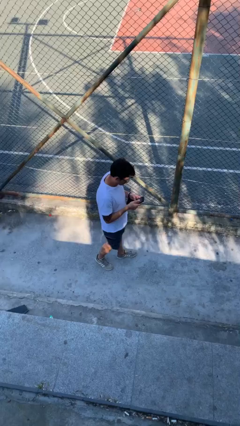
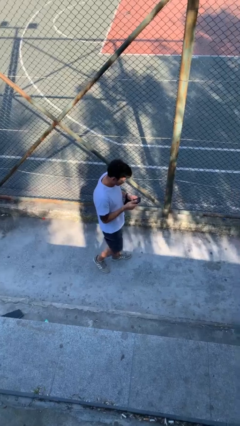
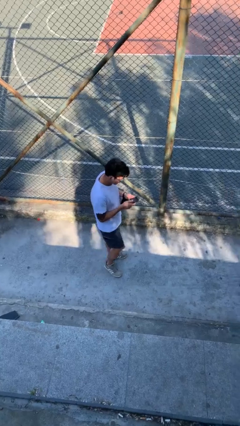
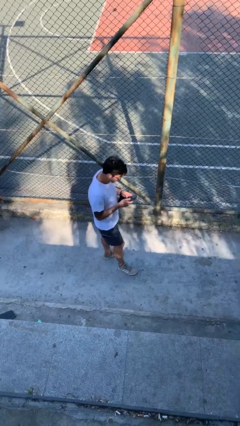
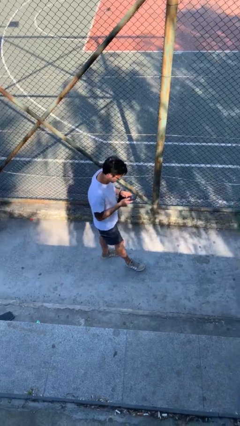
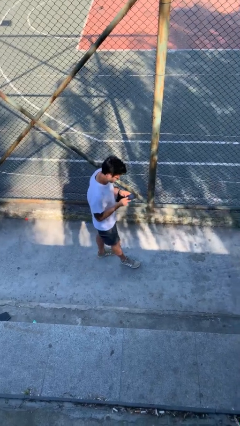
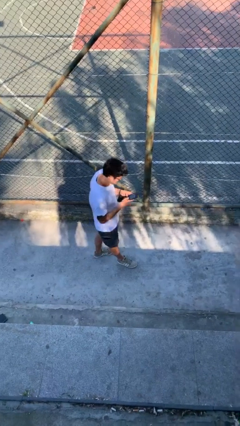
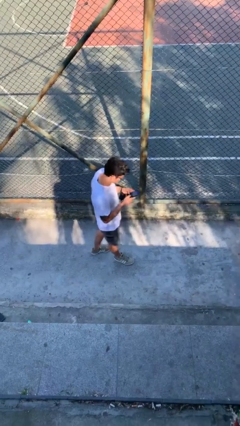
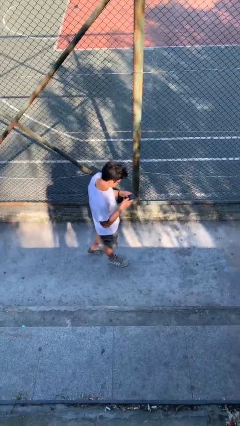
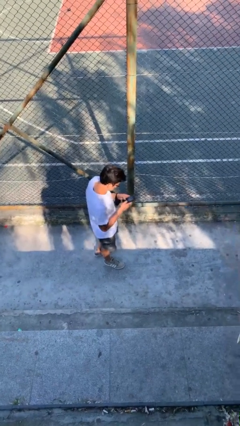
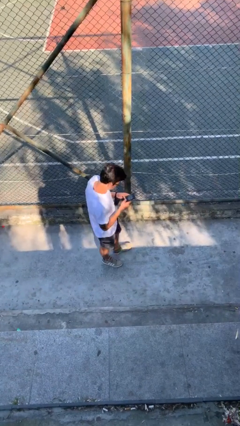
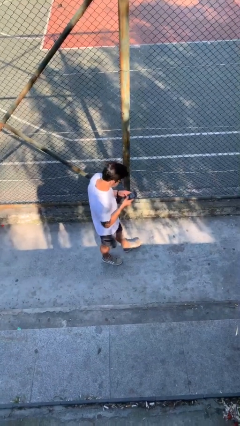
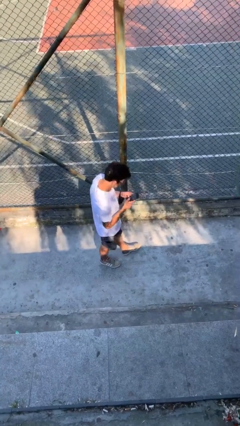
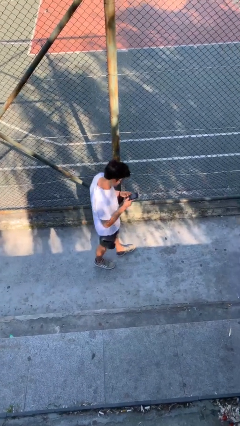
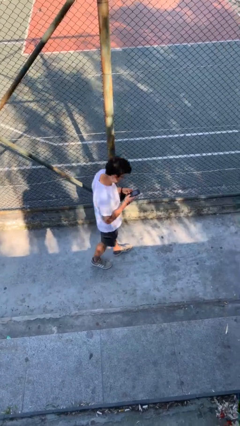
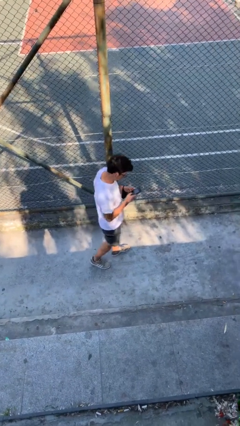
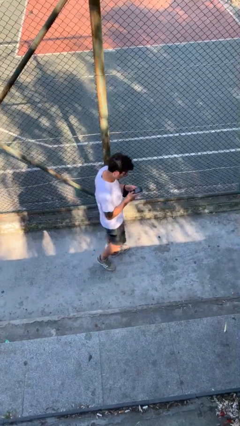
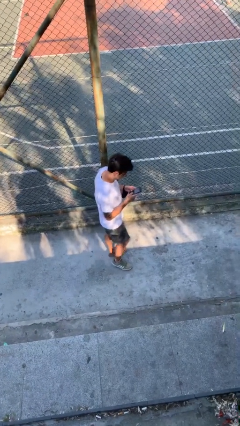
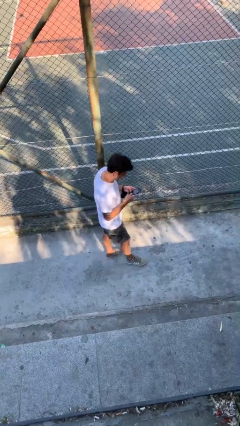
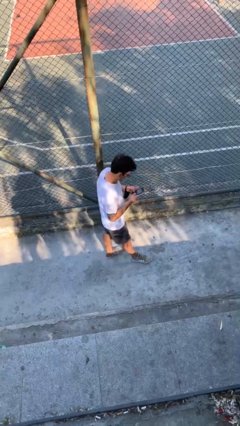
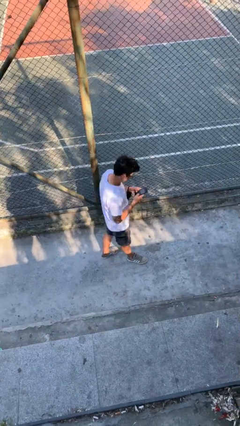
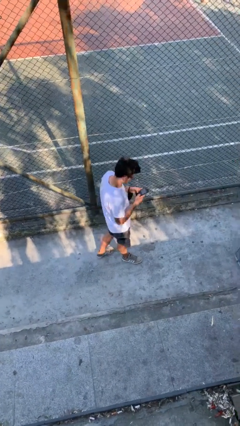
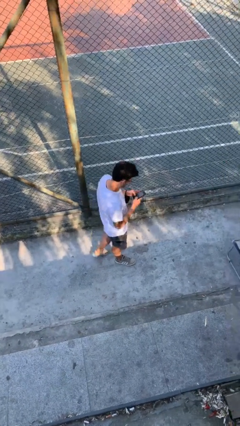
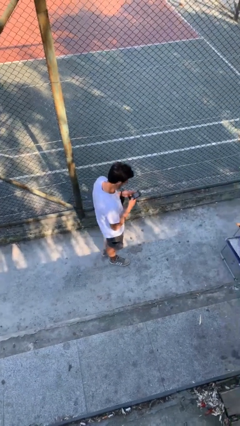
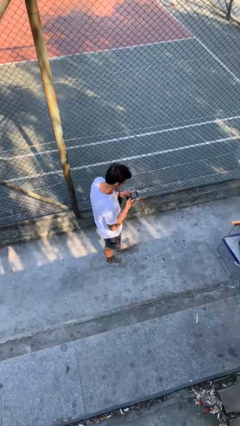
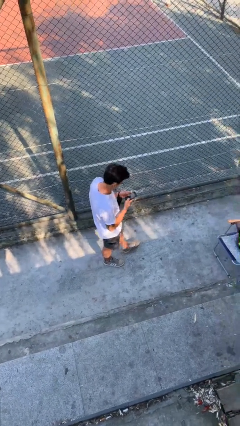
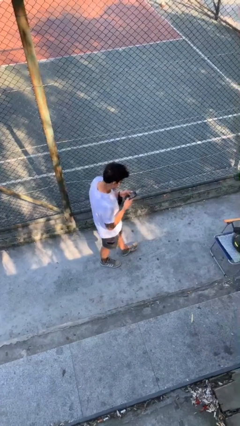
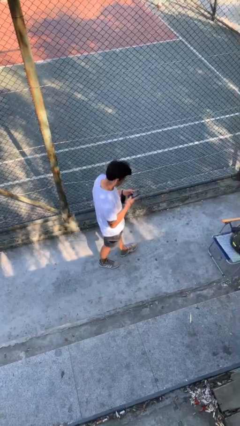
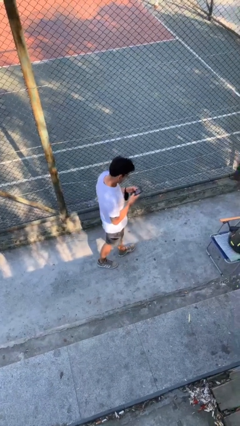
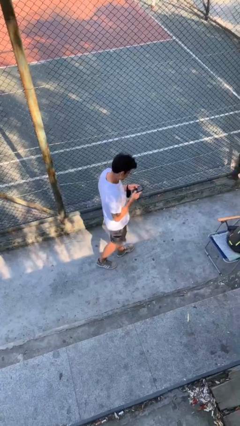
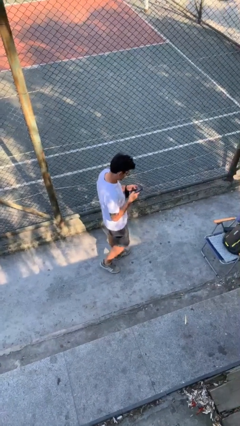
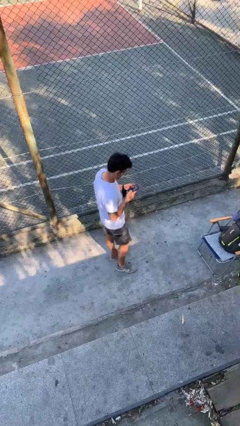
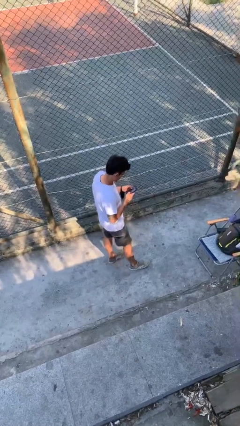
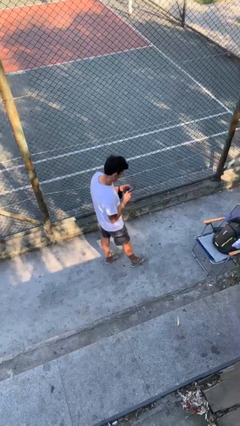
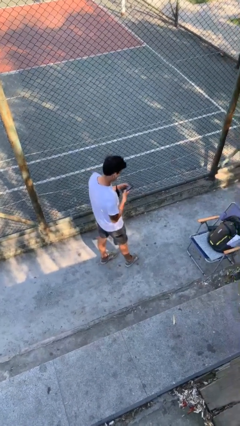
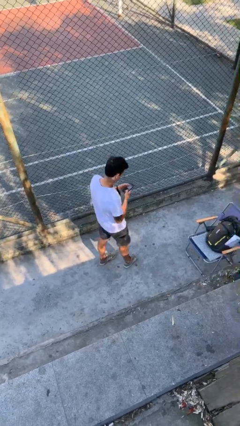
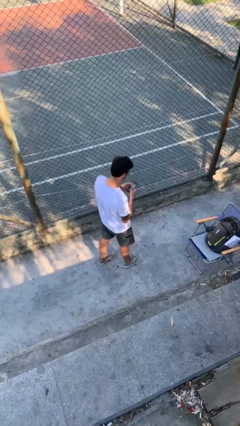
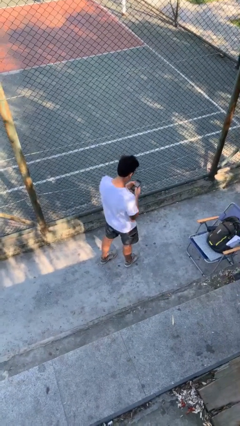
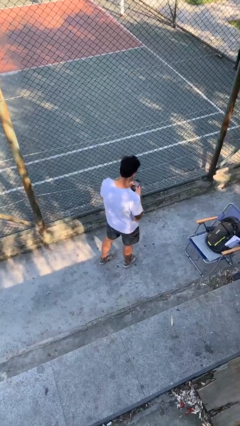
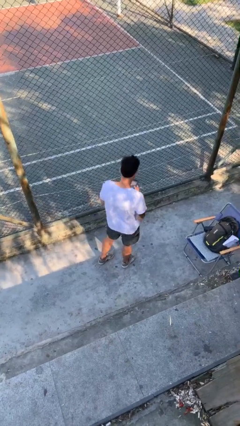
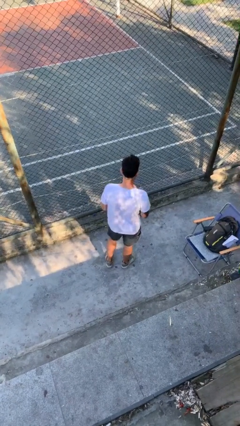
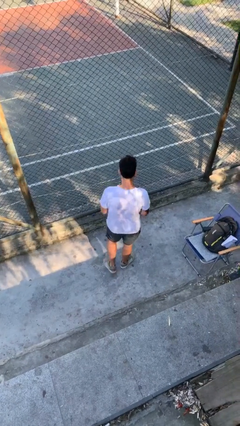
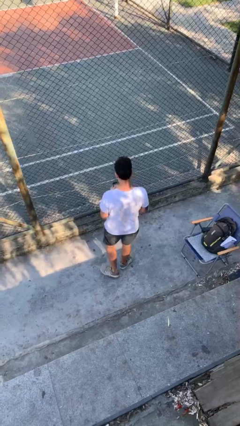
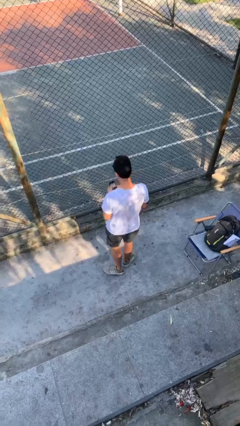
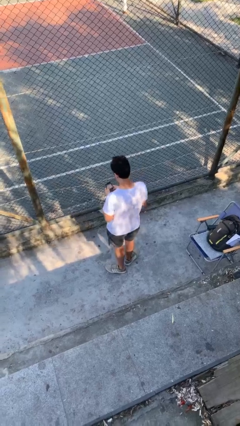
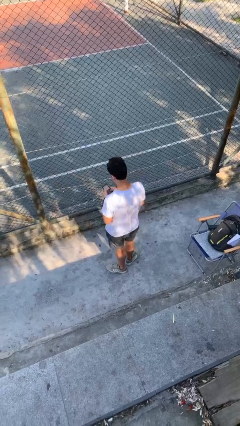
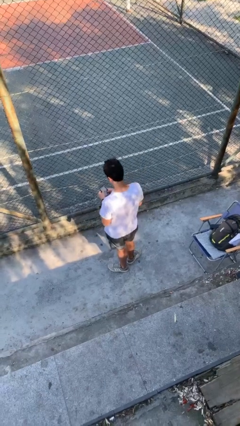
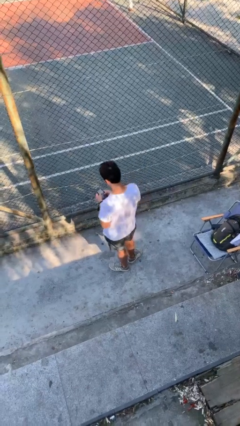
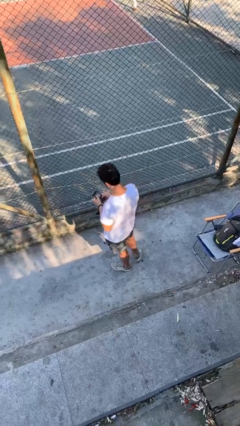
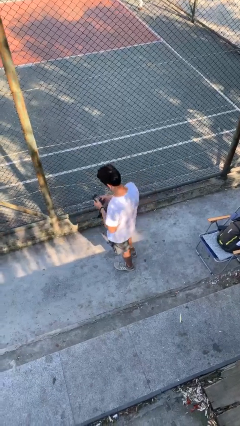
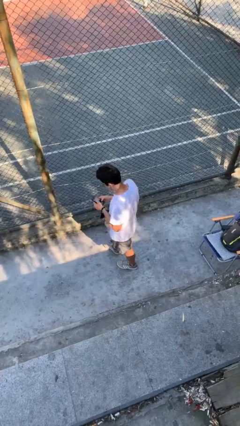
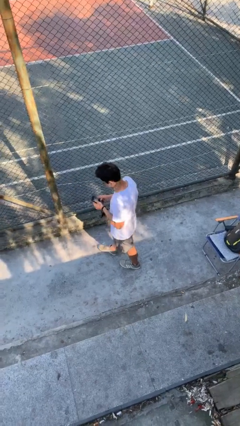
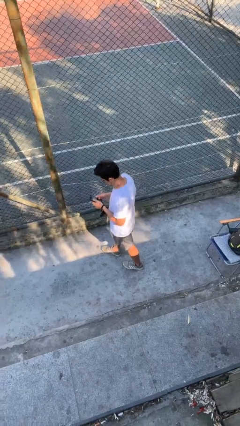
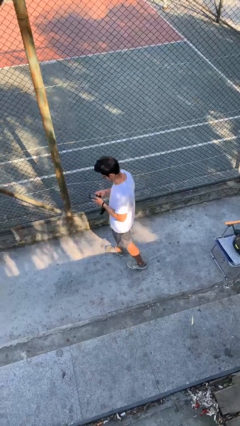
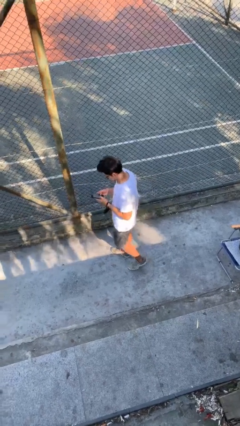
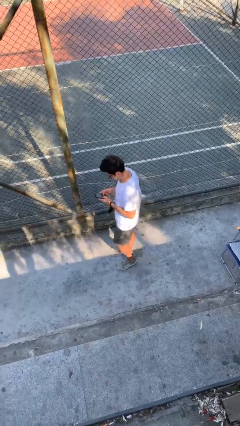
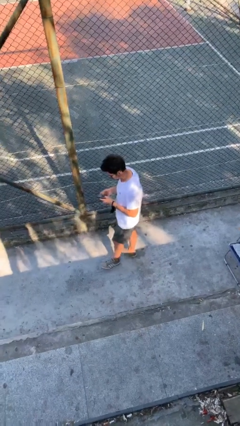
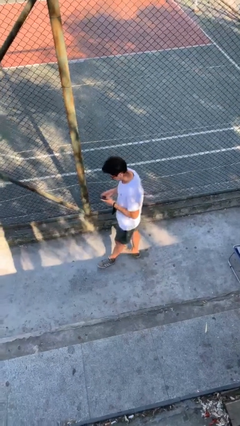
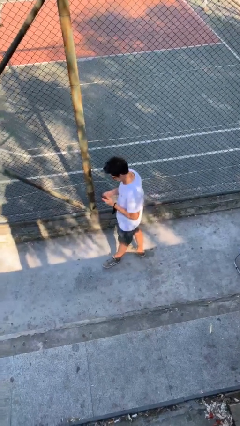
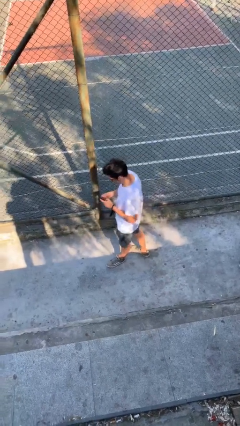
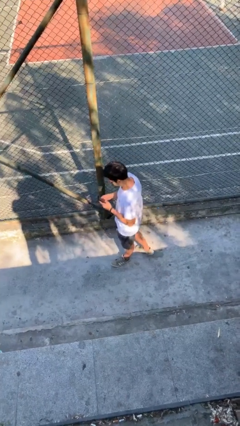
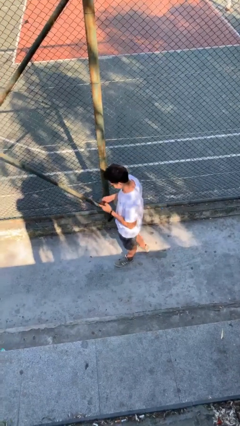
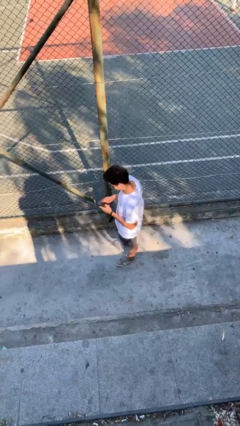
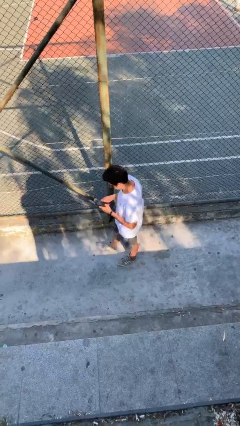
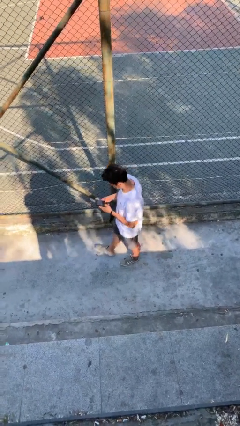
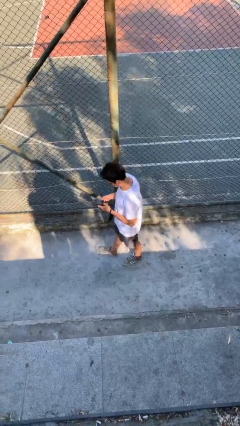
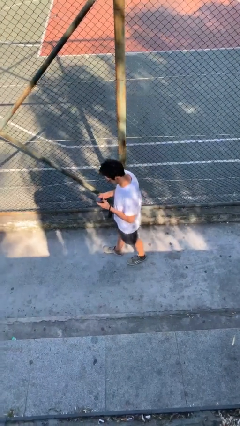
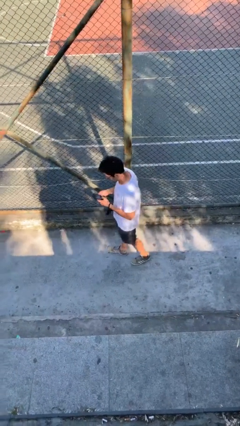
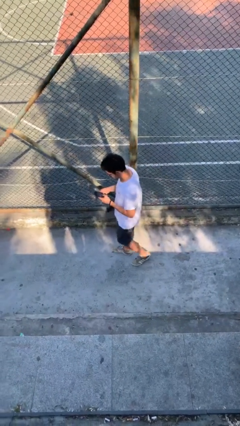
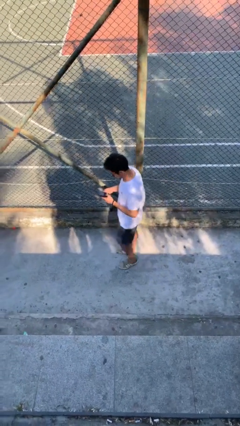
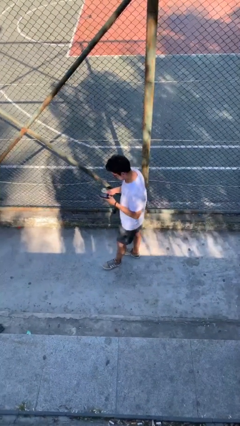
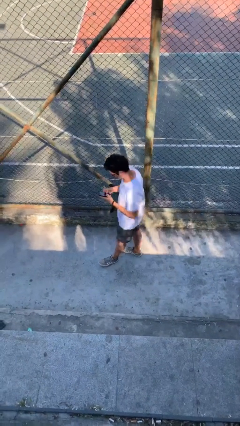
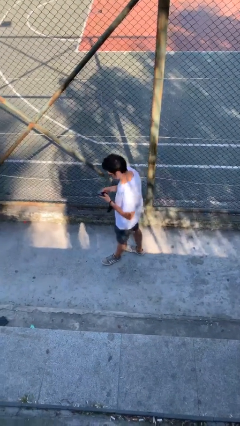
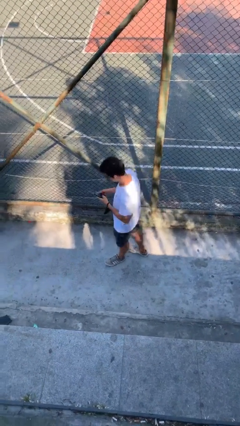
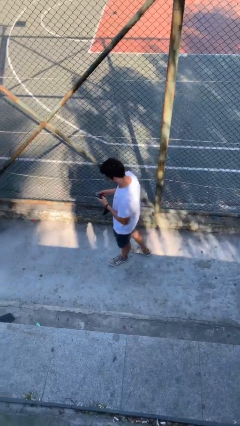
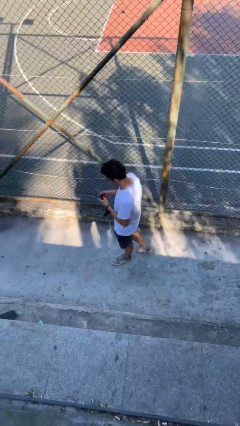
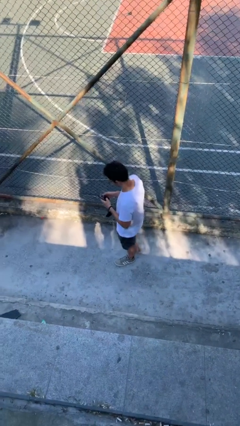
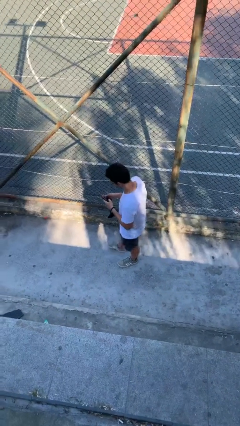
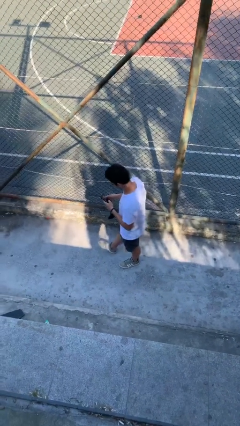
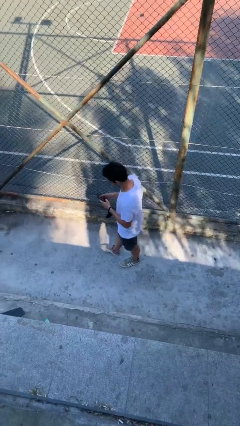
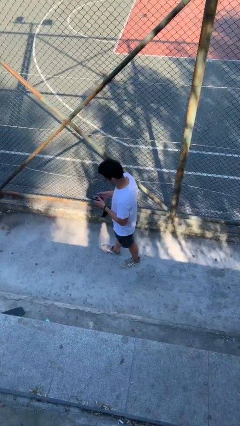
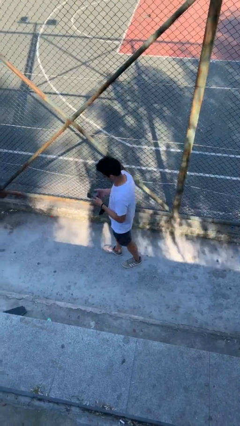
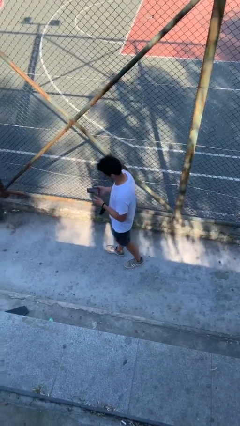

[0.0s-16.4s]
person texts on phone

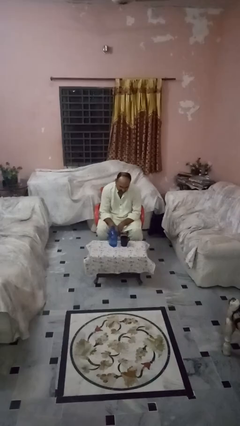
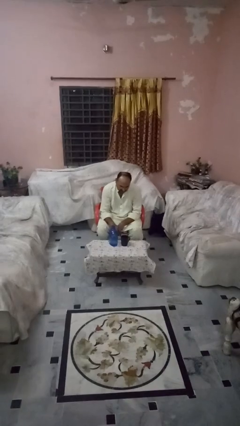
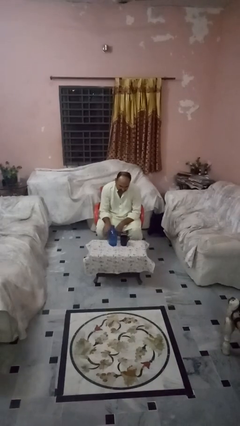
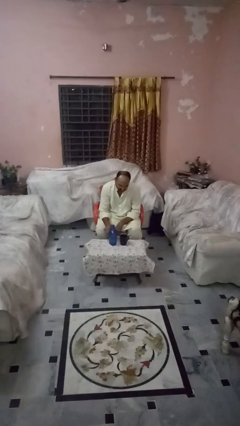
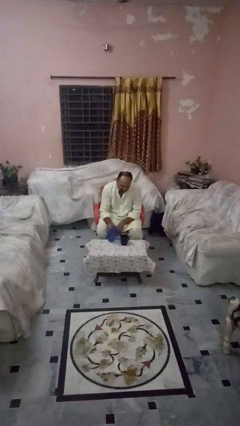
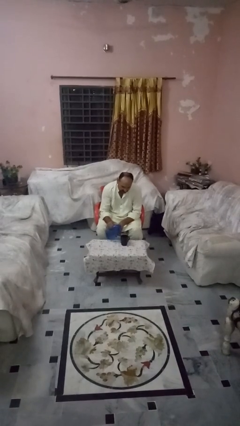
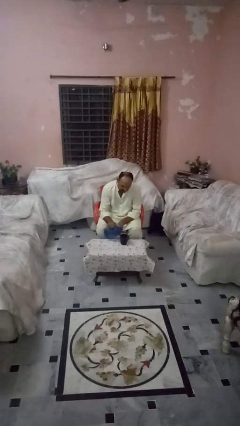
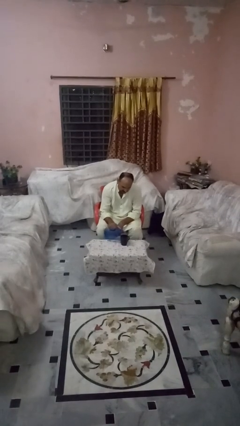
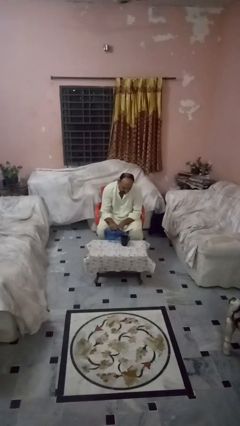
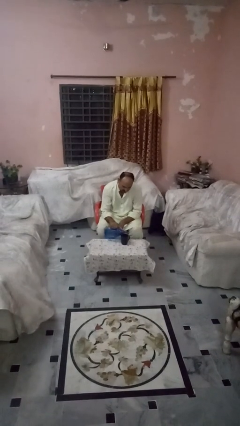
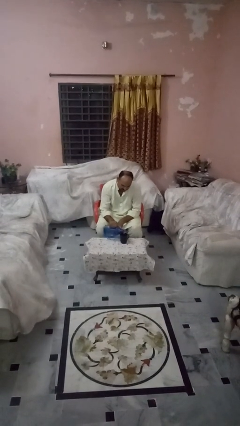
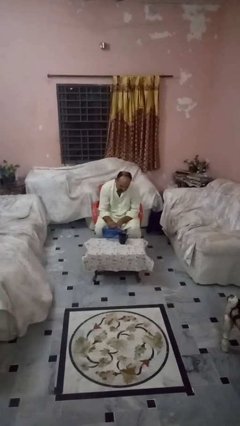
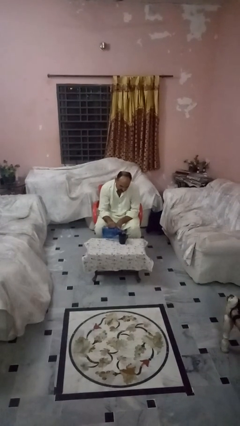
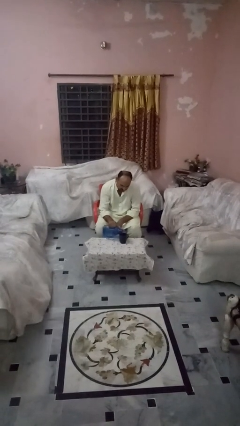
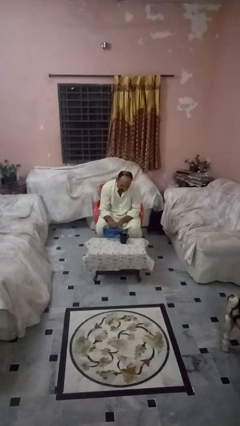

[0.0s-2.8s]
person pours liquid into cup
